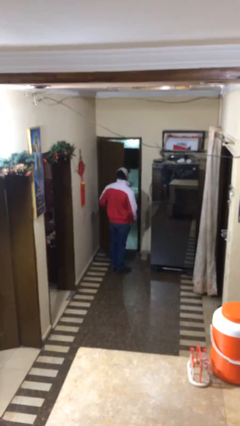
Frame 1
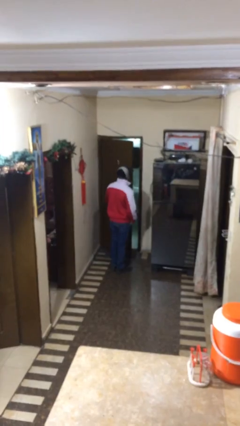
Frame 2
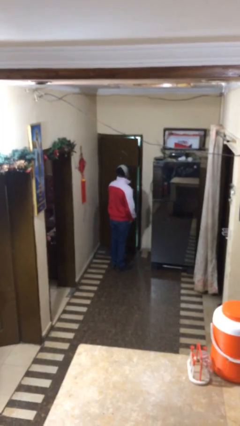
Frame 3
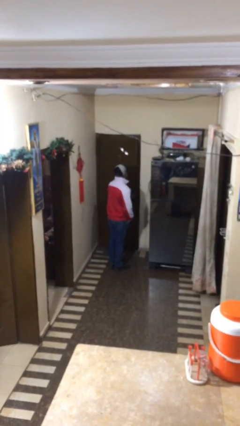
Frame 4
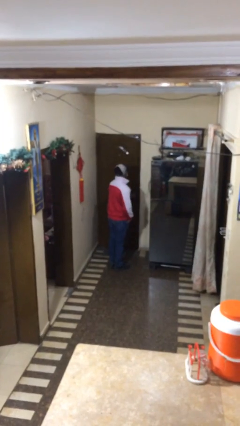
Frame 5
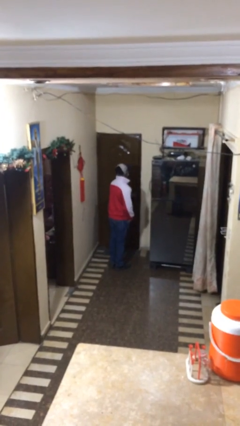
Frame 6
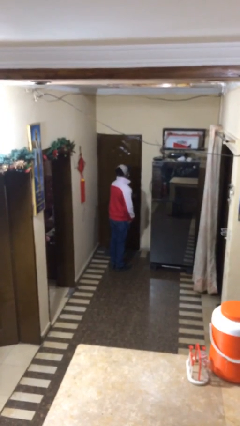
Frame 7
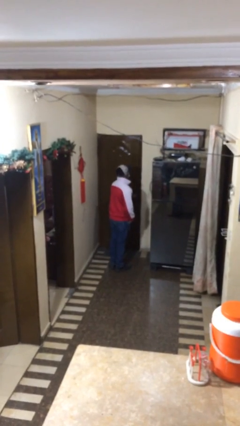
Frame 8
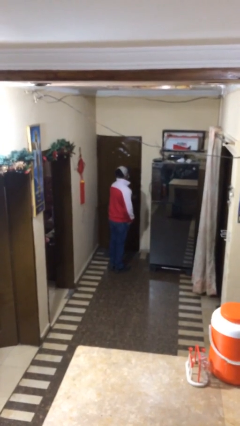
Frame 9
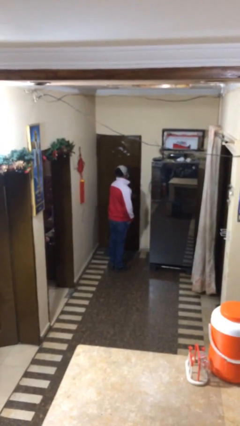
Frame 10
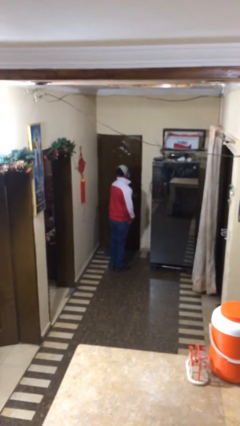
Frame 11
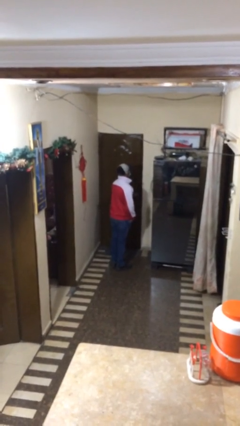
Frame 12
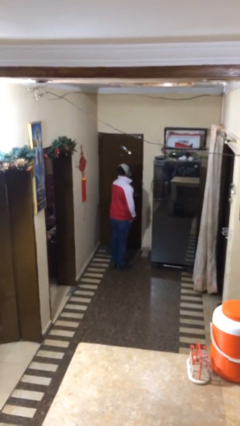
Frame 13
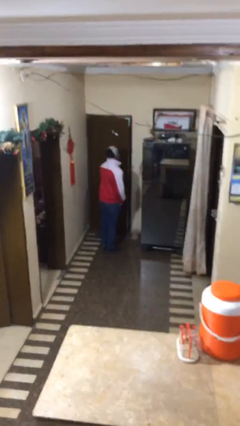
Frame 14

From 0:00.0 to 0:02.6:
person closes facility door

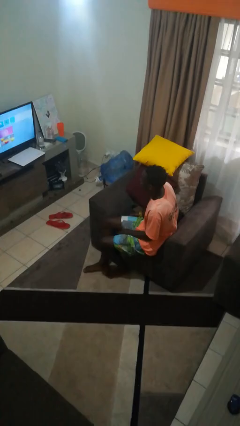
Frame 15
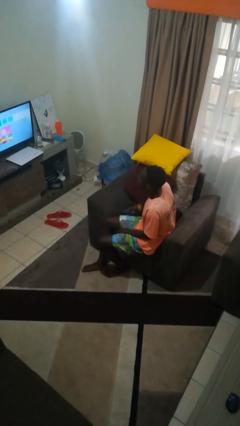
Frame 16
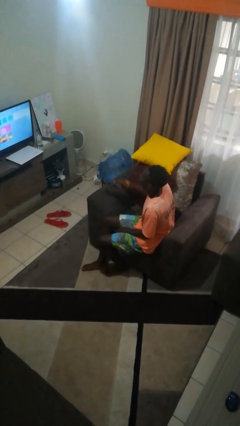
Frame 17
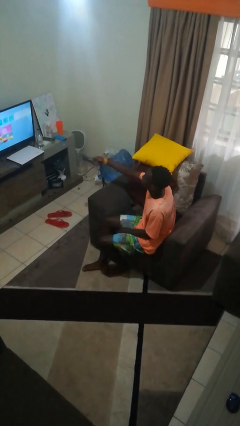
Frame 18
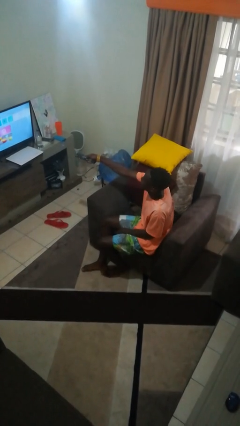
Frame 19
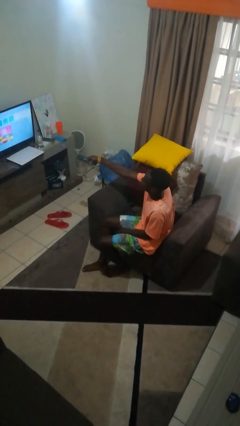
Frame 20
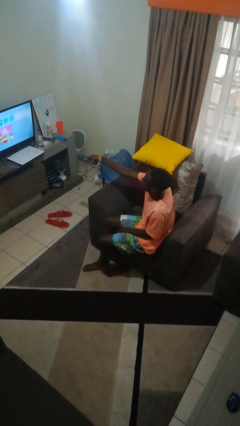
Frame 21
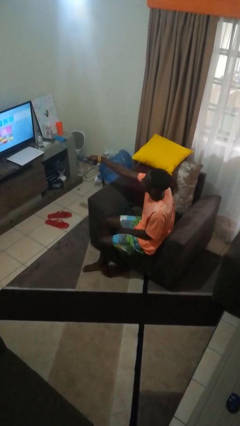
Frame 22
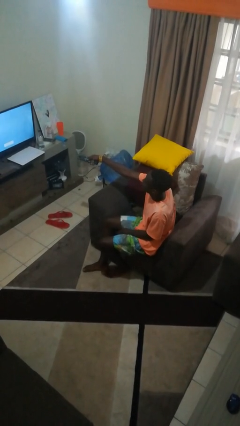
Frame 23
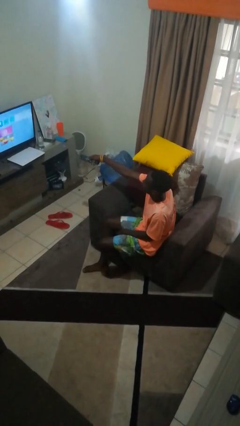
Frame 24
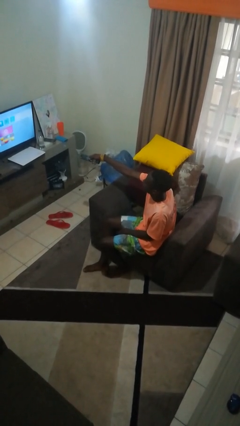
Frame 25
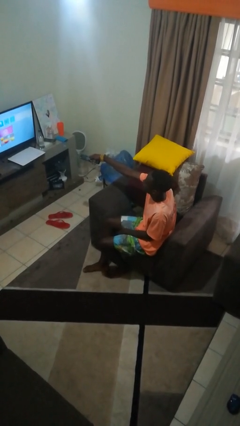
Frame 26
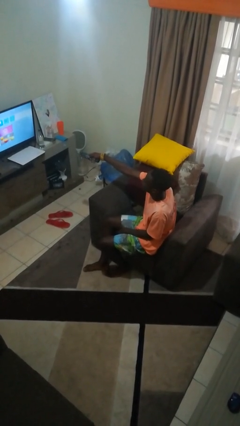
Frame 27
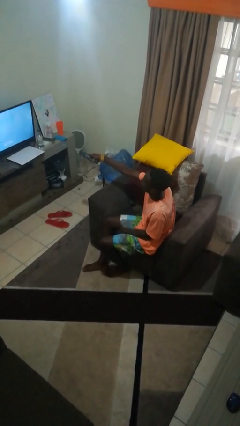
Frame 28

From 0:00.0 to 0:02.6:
person uses television remote

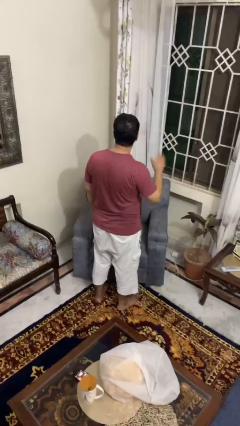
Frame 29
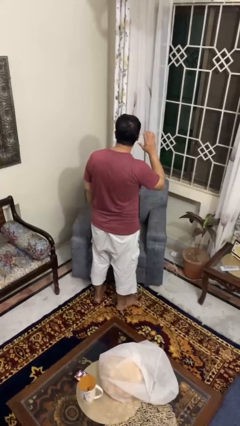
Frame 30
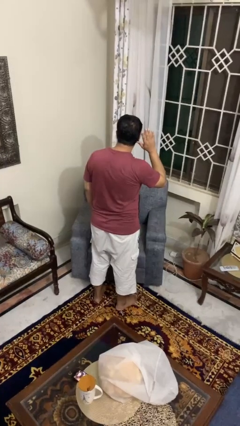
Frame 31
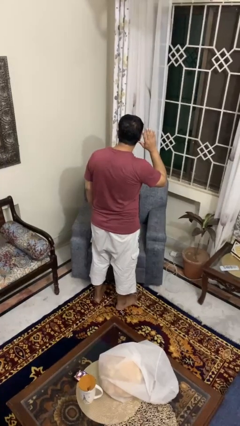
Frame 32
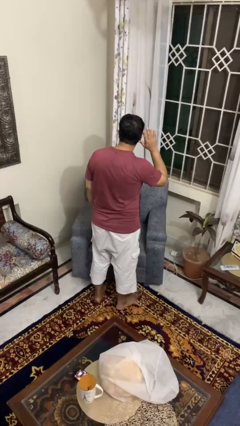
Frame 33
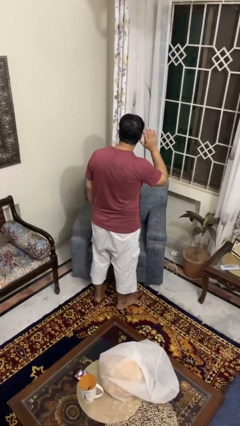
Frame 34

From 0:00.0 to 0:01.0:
person gestures listen closely

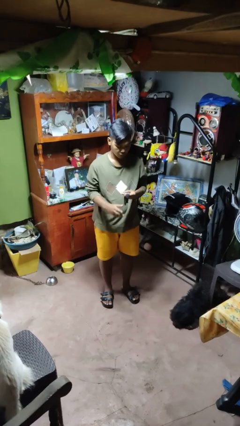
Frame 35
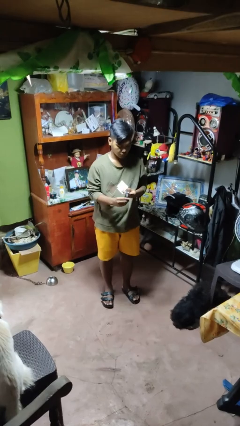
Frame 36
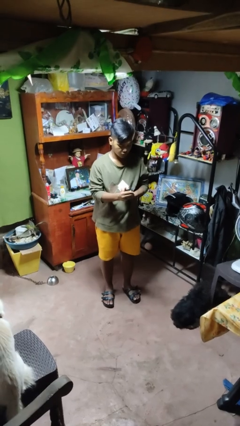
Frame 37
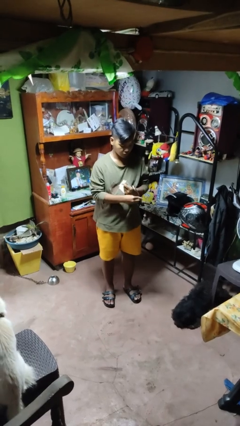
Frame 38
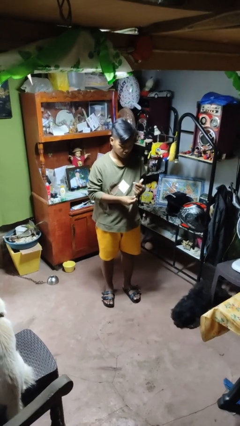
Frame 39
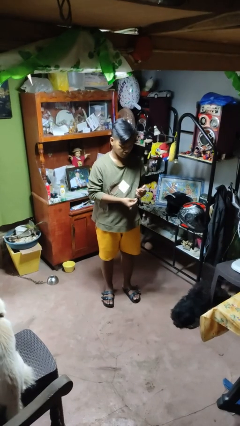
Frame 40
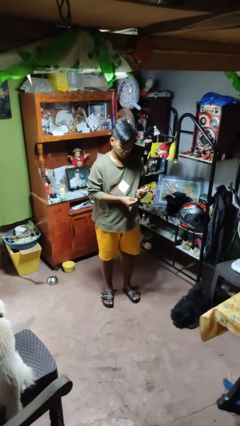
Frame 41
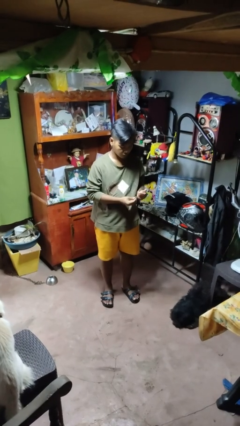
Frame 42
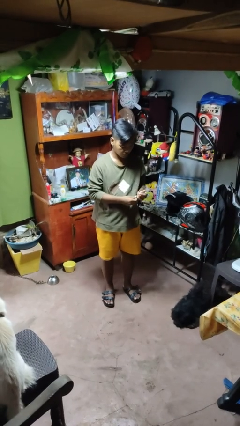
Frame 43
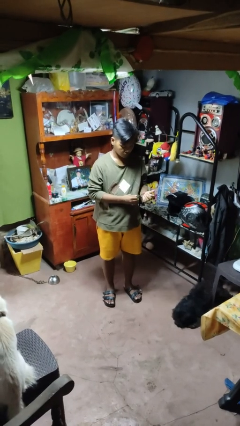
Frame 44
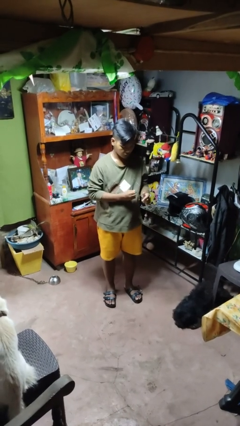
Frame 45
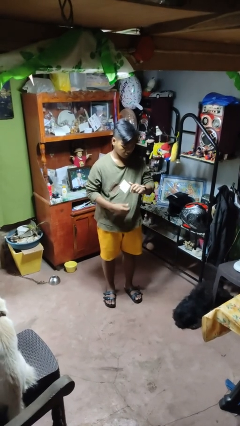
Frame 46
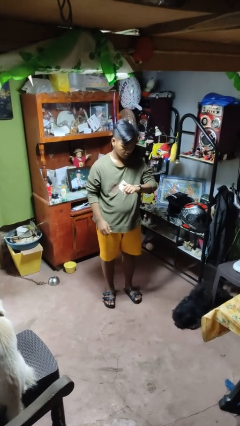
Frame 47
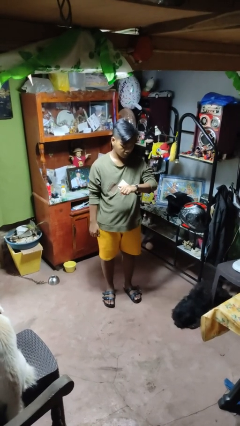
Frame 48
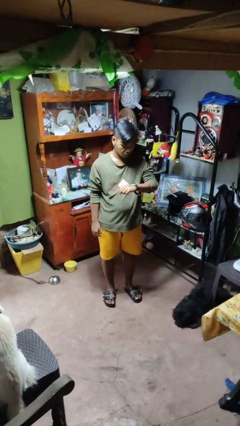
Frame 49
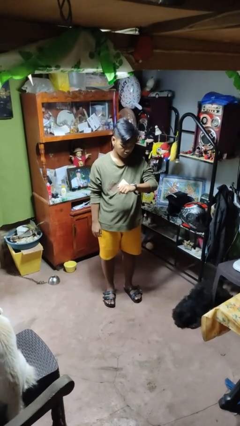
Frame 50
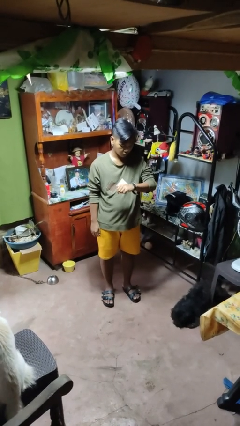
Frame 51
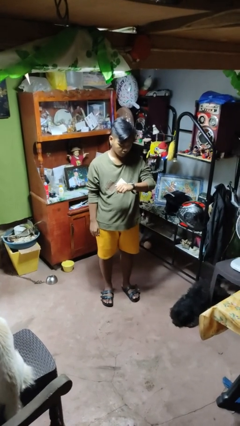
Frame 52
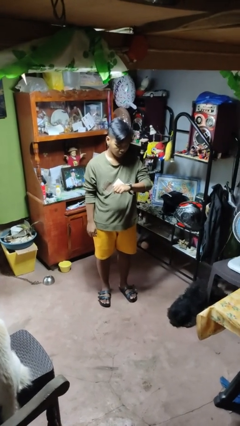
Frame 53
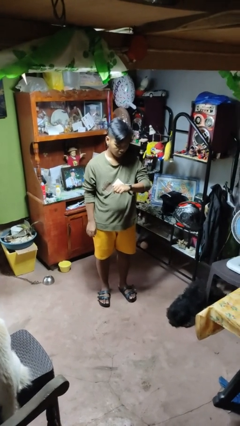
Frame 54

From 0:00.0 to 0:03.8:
person puts on wristwatch

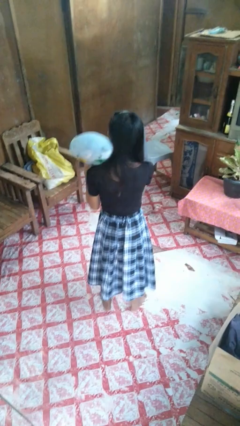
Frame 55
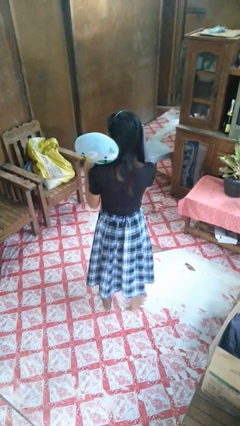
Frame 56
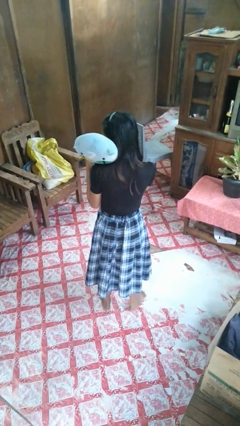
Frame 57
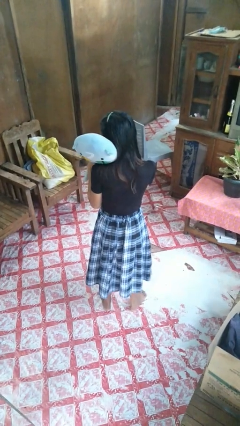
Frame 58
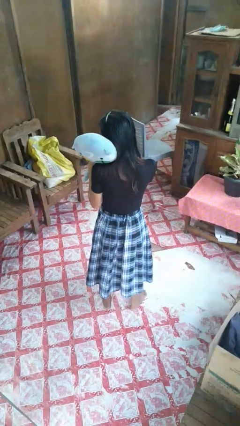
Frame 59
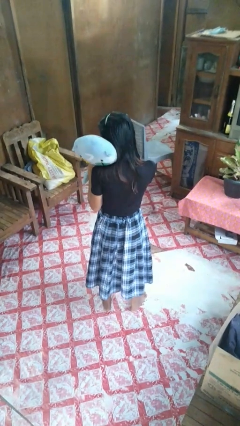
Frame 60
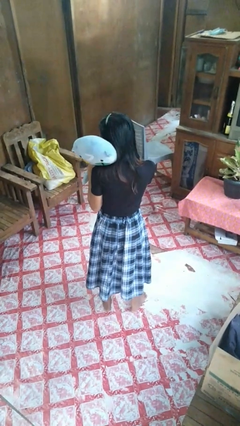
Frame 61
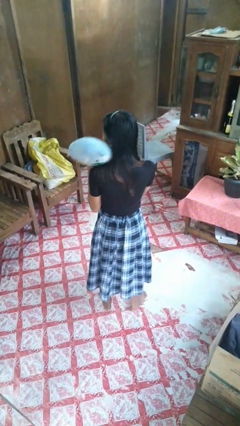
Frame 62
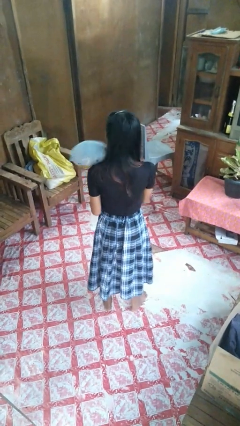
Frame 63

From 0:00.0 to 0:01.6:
person hugs stuffed animal

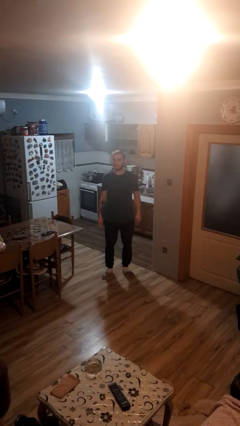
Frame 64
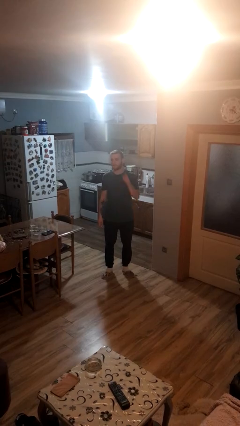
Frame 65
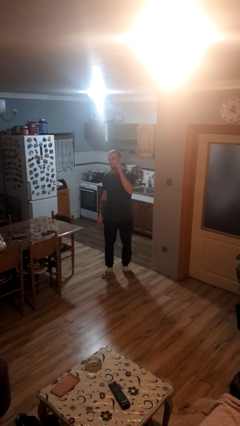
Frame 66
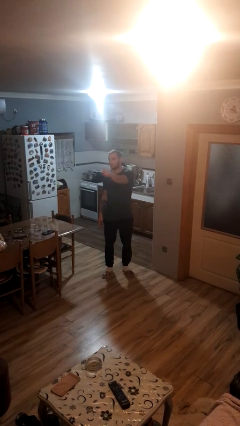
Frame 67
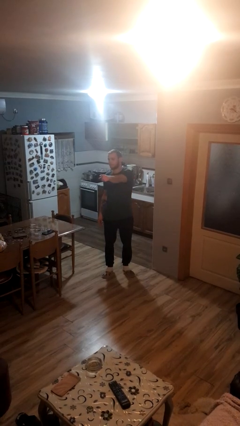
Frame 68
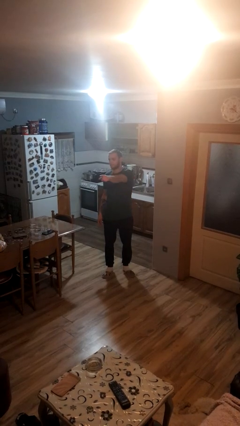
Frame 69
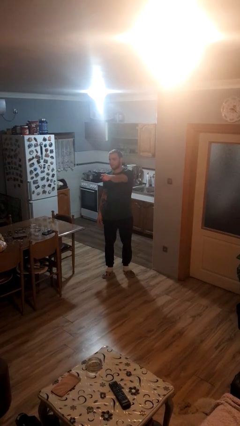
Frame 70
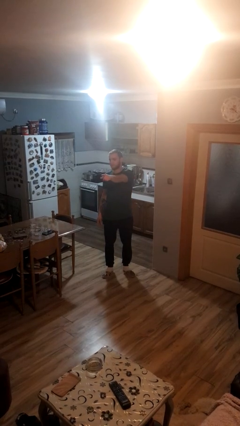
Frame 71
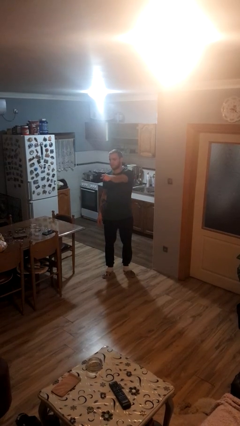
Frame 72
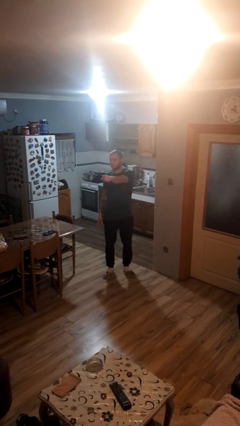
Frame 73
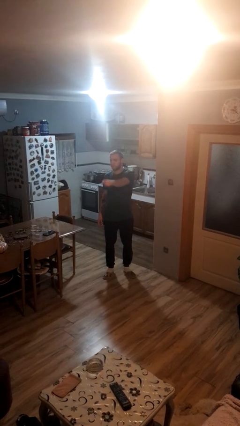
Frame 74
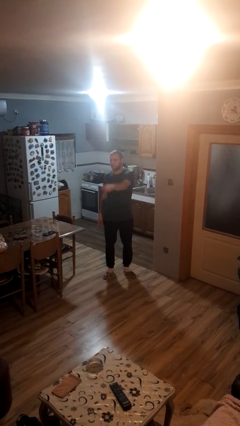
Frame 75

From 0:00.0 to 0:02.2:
person points at person

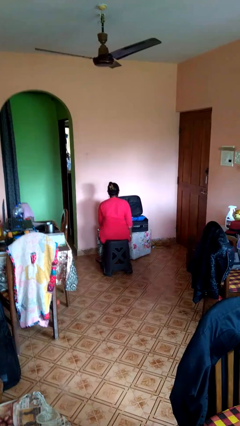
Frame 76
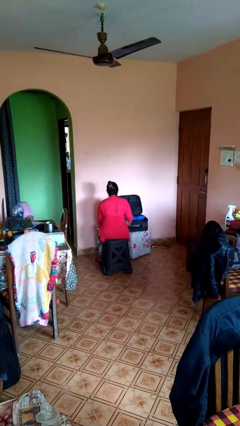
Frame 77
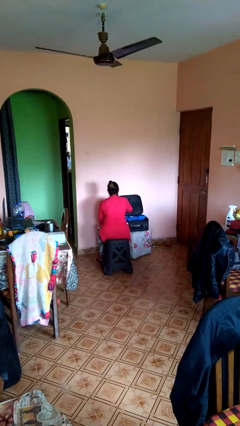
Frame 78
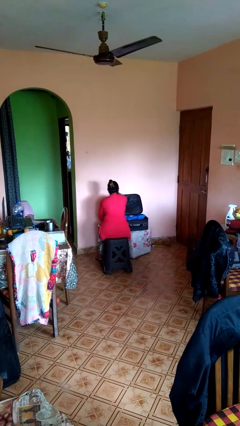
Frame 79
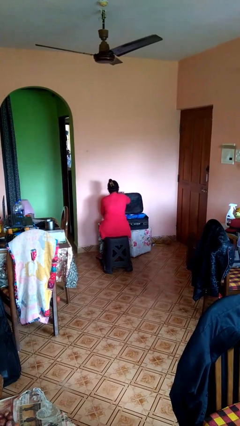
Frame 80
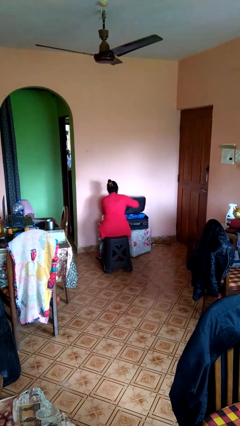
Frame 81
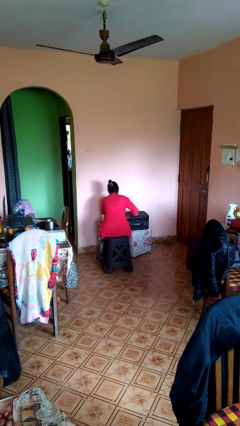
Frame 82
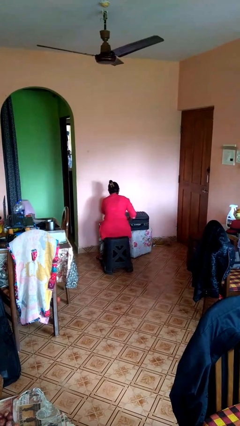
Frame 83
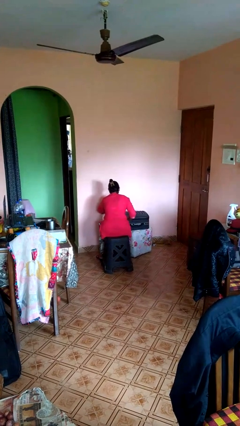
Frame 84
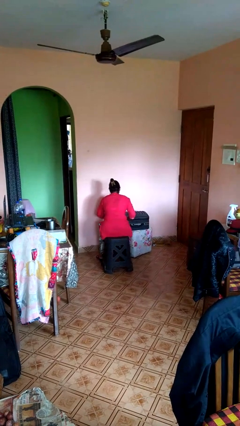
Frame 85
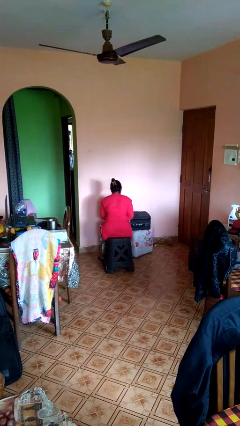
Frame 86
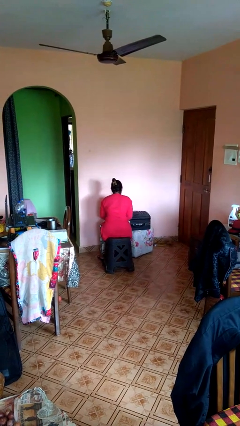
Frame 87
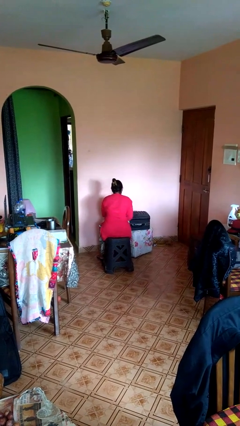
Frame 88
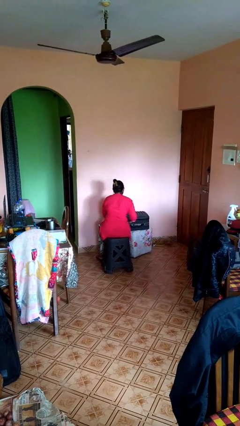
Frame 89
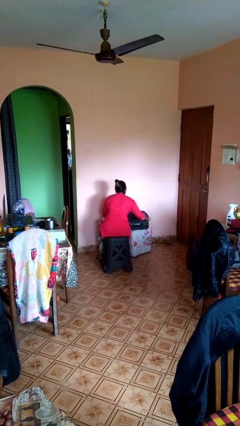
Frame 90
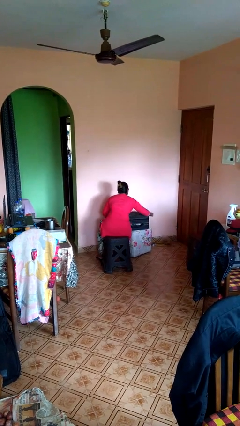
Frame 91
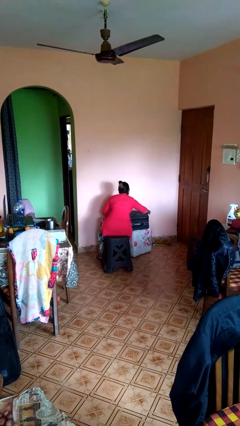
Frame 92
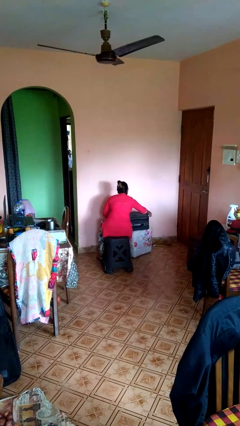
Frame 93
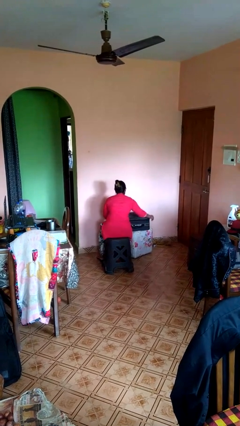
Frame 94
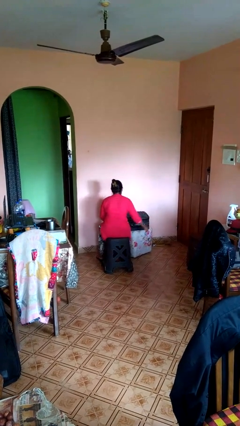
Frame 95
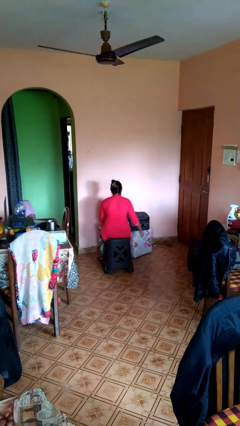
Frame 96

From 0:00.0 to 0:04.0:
person closes suitcase
